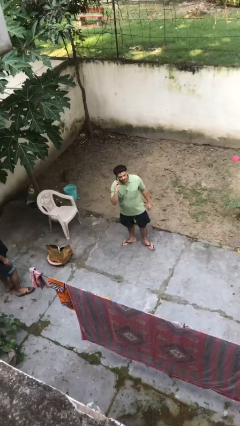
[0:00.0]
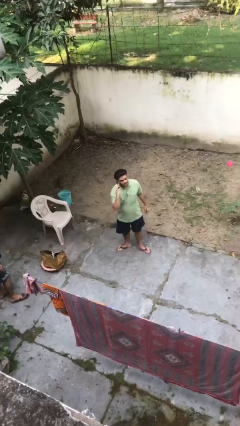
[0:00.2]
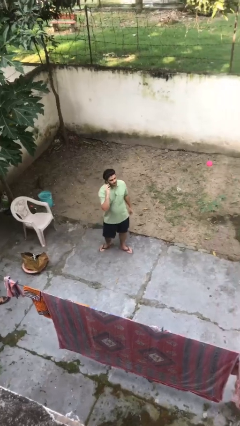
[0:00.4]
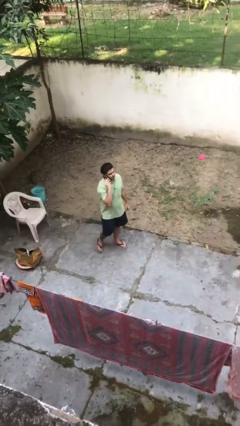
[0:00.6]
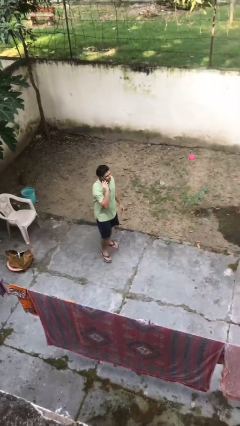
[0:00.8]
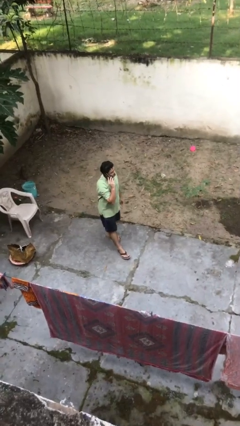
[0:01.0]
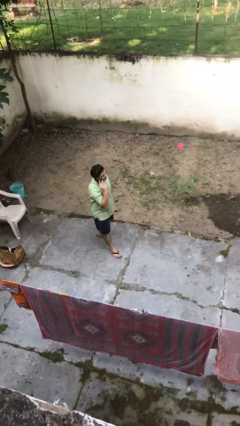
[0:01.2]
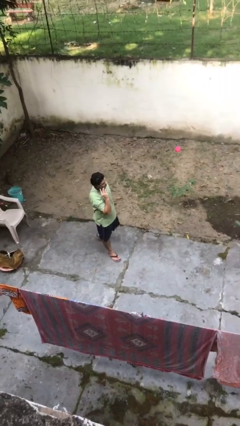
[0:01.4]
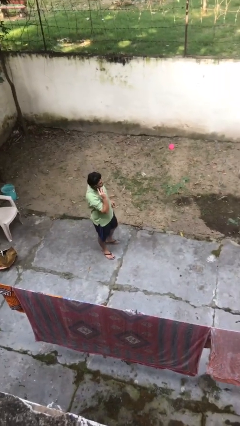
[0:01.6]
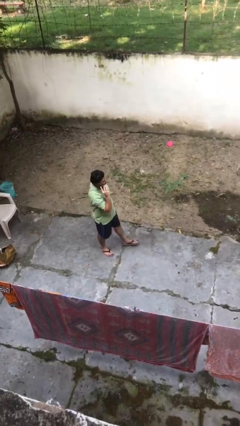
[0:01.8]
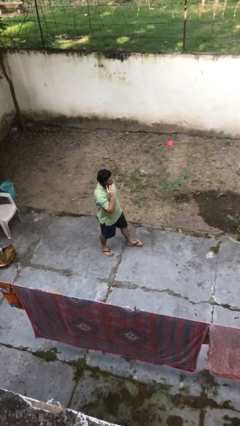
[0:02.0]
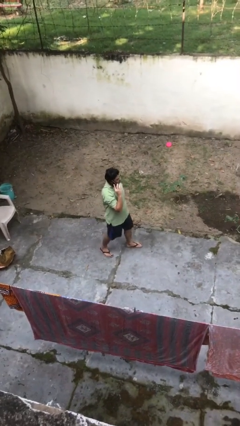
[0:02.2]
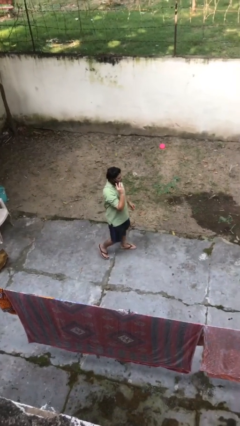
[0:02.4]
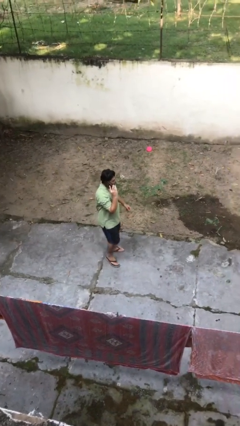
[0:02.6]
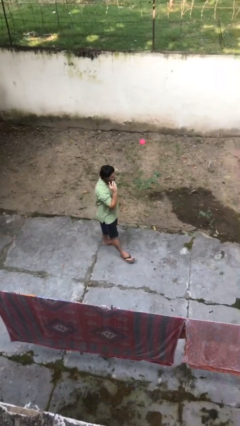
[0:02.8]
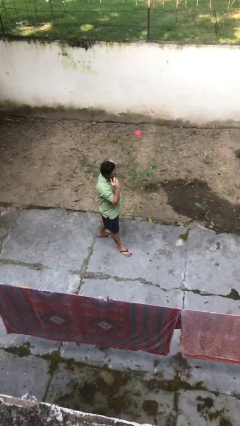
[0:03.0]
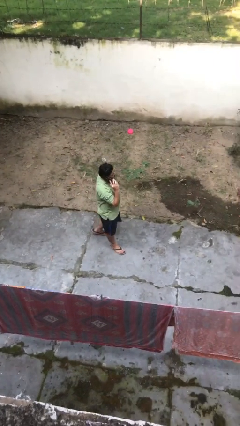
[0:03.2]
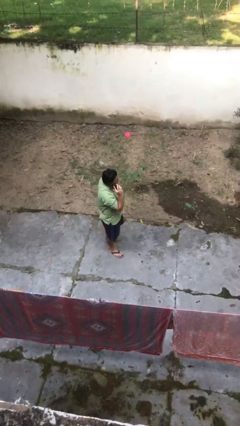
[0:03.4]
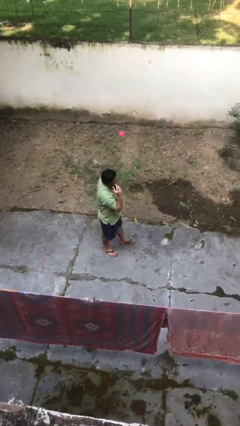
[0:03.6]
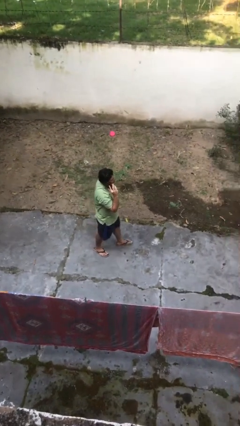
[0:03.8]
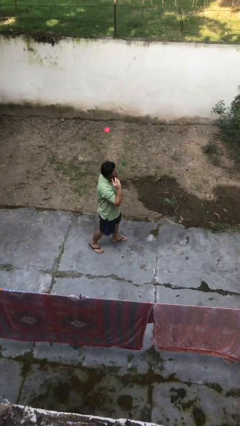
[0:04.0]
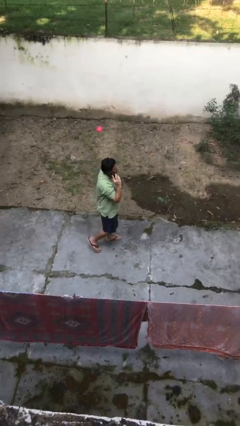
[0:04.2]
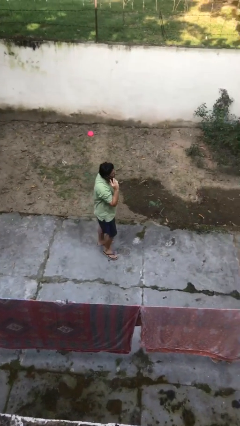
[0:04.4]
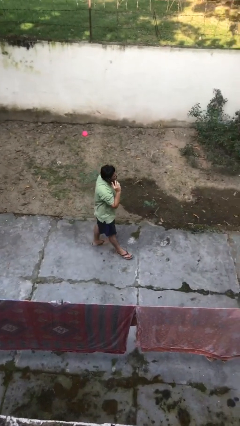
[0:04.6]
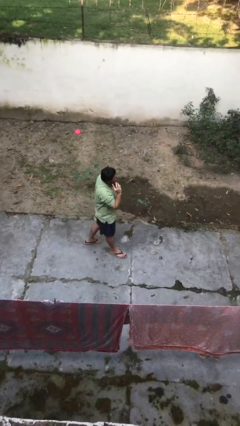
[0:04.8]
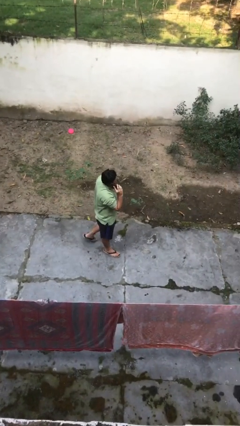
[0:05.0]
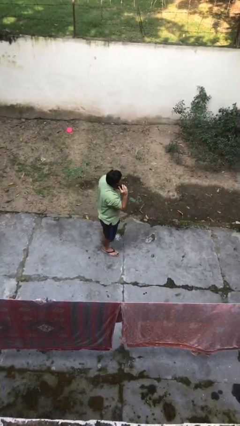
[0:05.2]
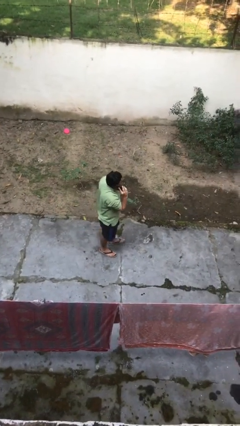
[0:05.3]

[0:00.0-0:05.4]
person talks on phone

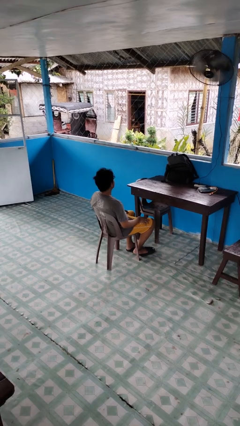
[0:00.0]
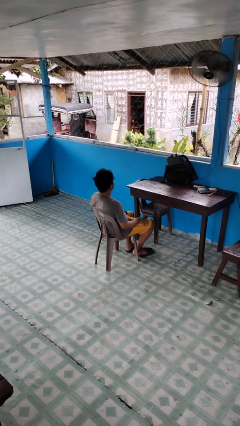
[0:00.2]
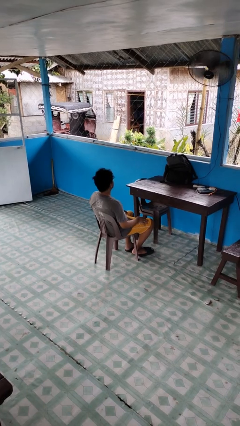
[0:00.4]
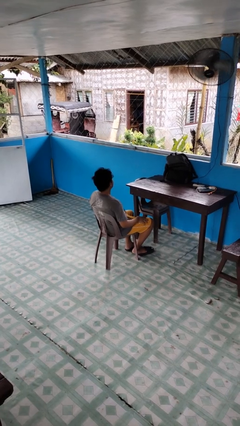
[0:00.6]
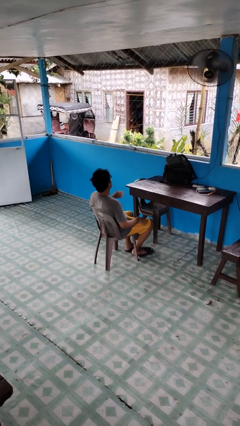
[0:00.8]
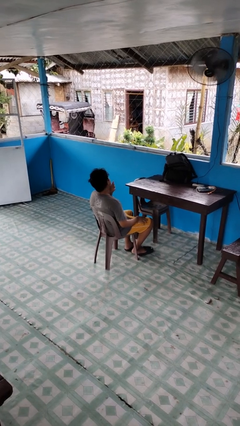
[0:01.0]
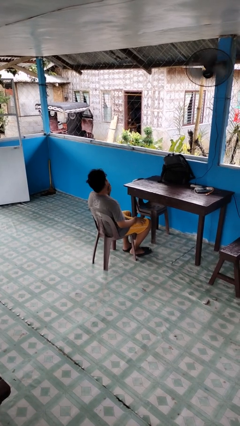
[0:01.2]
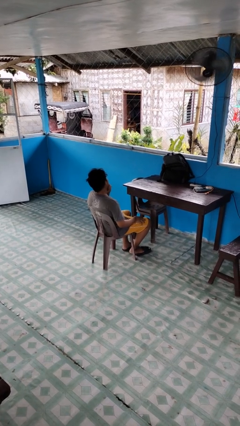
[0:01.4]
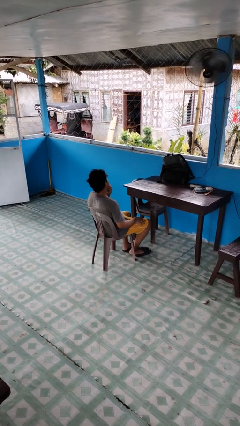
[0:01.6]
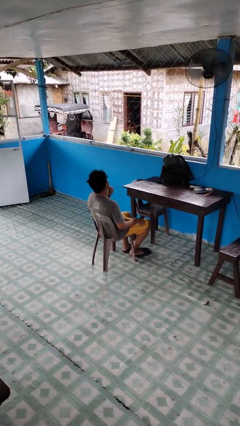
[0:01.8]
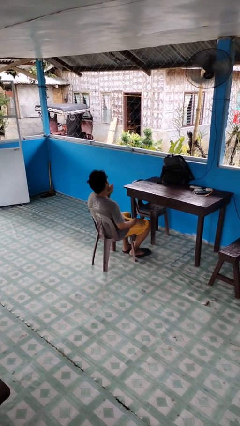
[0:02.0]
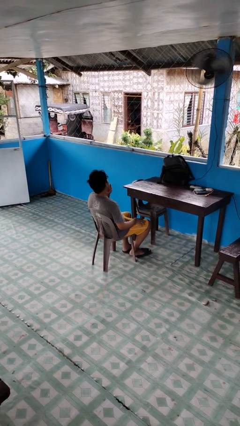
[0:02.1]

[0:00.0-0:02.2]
person strokes chin

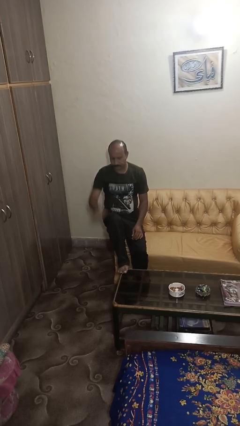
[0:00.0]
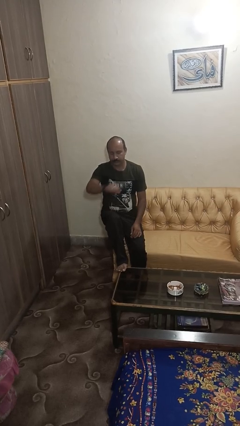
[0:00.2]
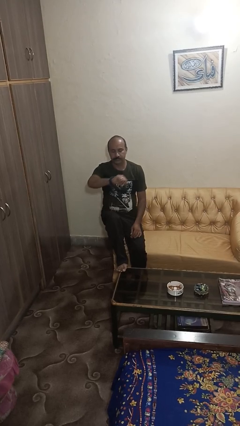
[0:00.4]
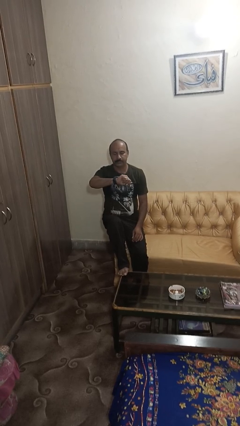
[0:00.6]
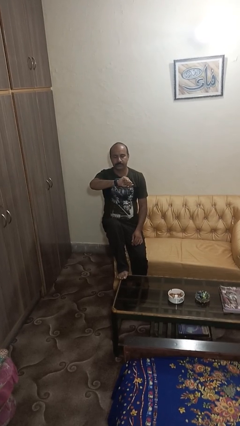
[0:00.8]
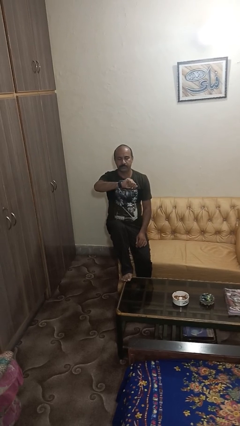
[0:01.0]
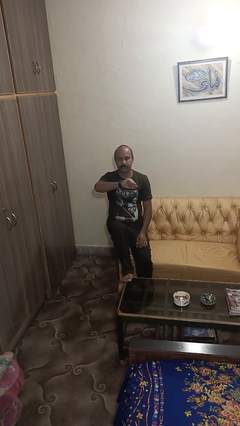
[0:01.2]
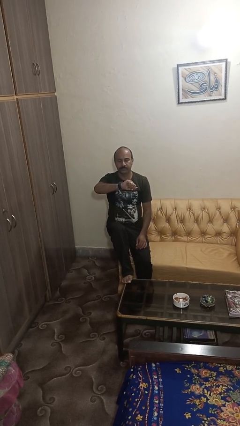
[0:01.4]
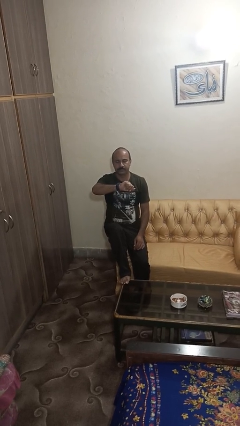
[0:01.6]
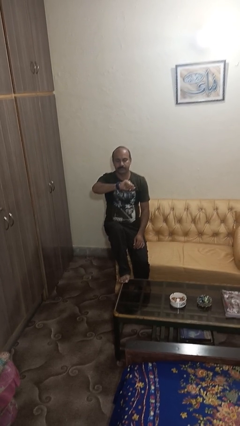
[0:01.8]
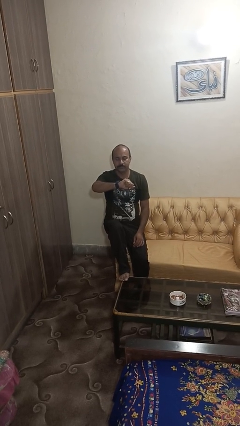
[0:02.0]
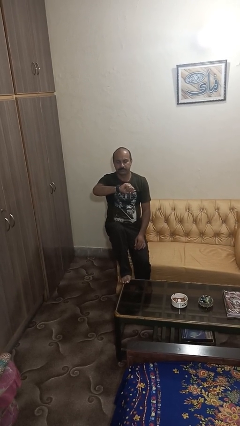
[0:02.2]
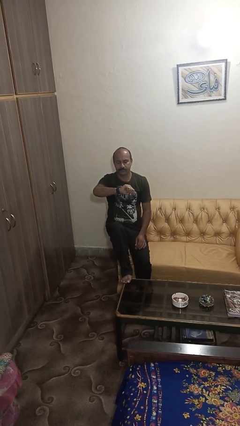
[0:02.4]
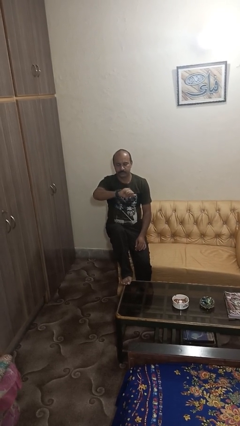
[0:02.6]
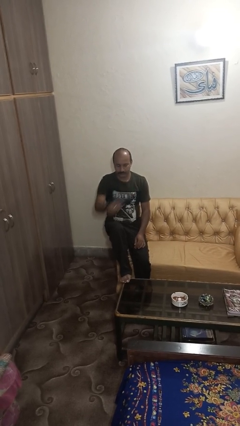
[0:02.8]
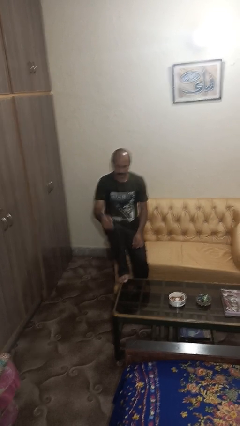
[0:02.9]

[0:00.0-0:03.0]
person looks at wristwatch

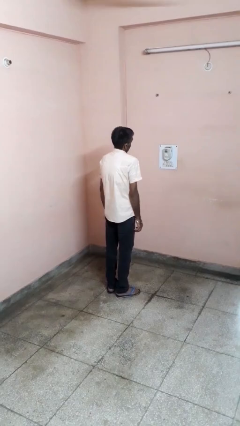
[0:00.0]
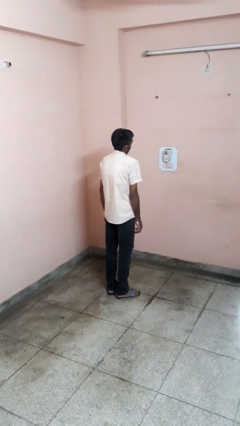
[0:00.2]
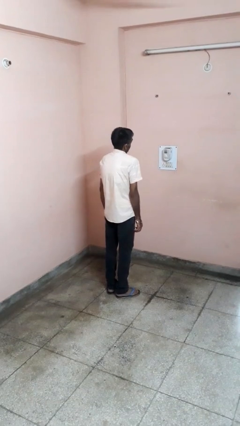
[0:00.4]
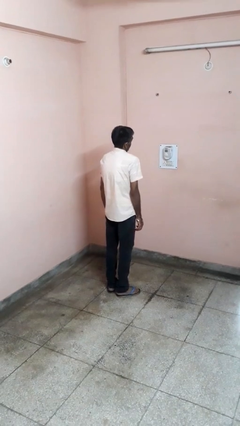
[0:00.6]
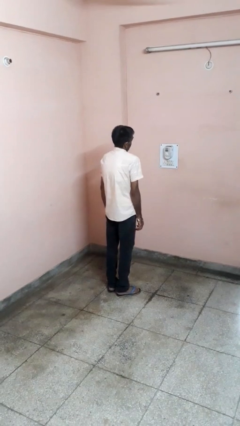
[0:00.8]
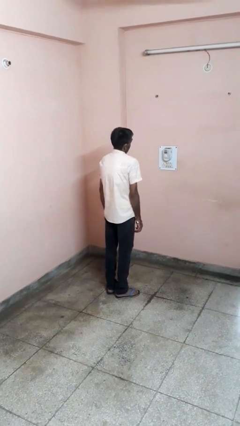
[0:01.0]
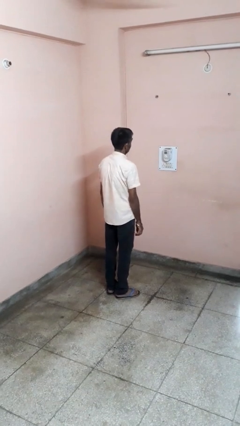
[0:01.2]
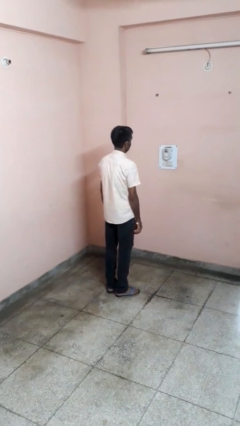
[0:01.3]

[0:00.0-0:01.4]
person shrugs

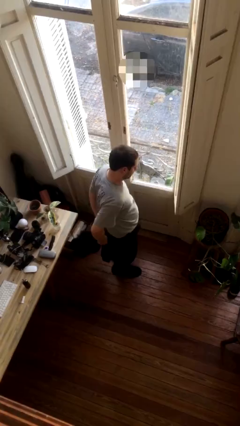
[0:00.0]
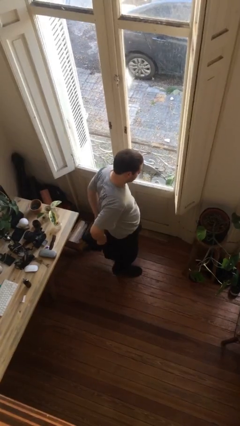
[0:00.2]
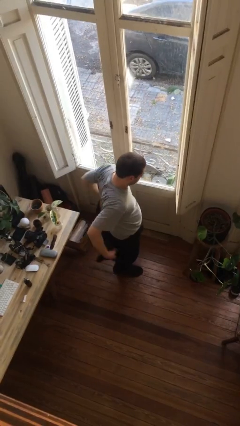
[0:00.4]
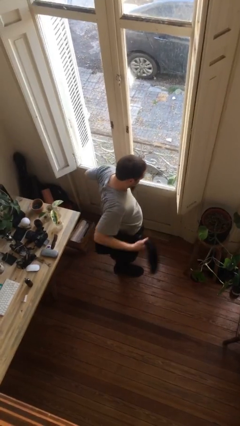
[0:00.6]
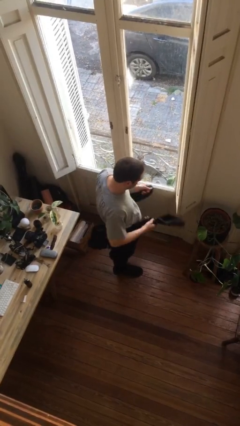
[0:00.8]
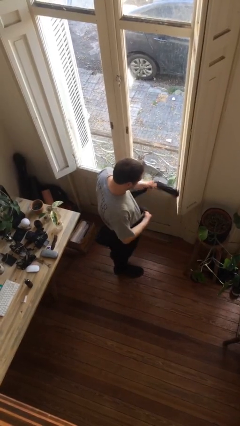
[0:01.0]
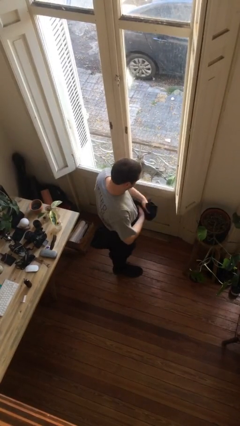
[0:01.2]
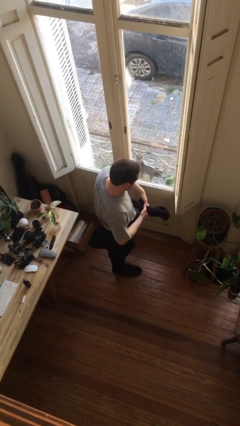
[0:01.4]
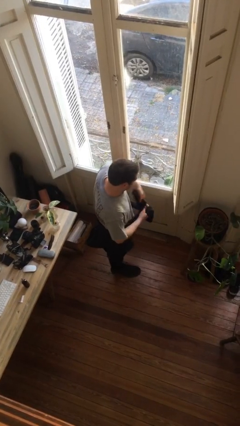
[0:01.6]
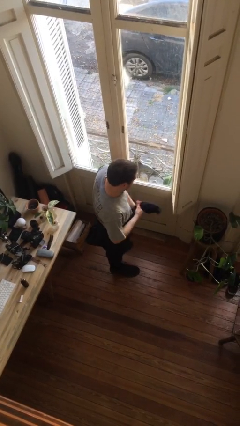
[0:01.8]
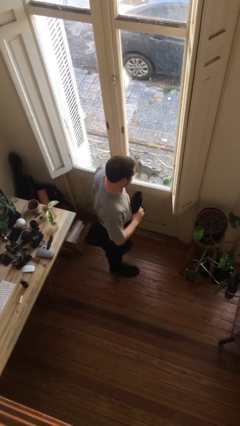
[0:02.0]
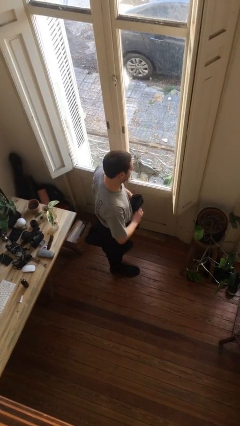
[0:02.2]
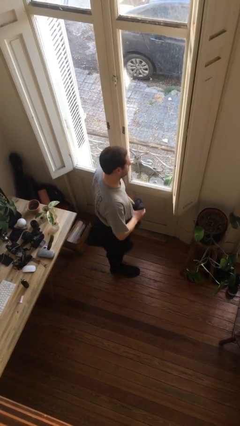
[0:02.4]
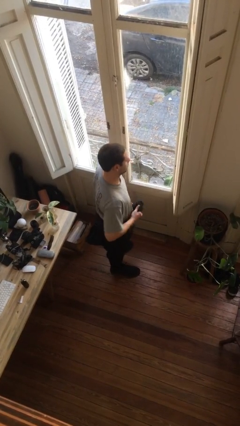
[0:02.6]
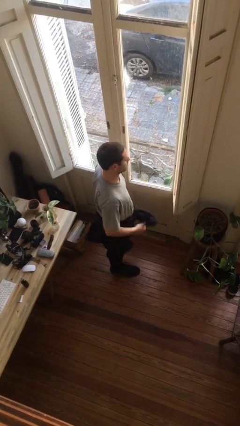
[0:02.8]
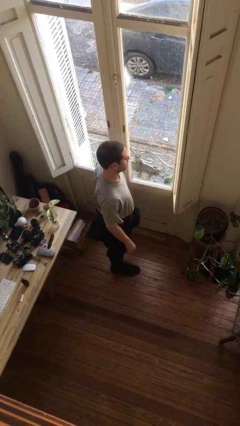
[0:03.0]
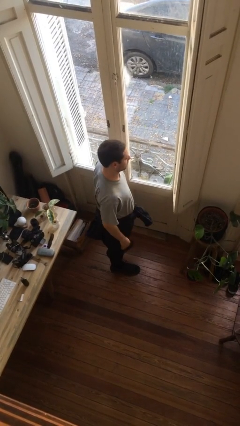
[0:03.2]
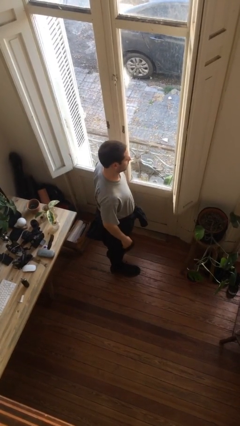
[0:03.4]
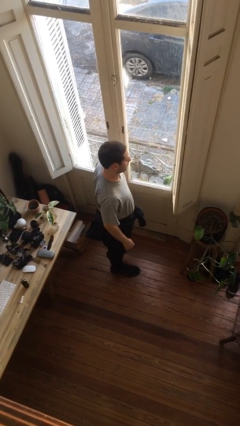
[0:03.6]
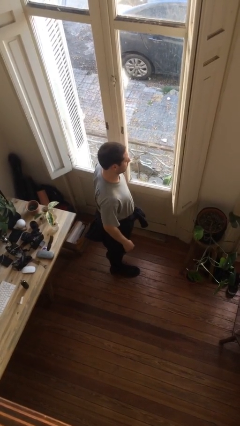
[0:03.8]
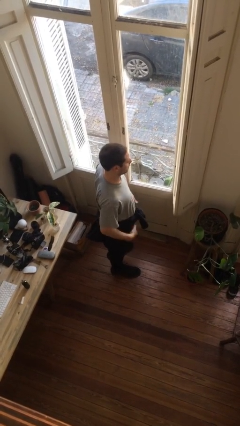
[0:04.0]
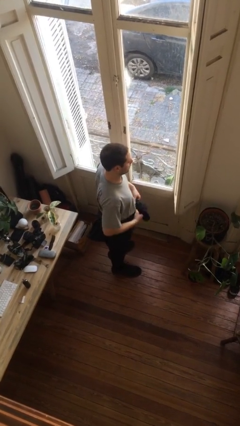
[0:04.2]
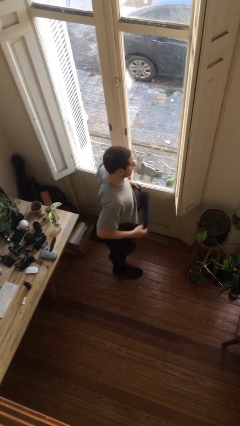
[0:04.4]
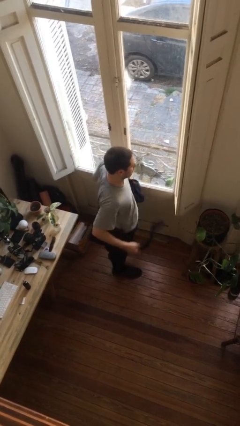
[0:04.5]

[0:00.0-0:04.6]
person ties jacket around waist

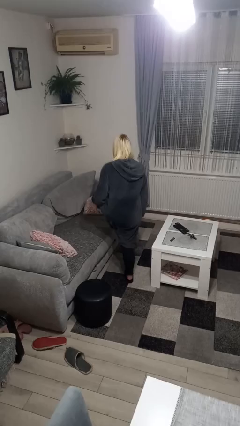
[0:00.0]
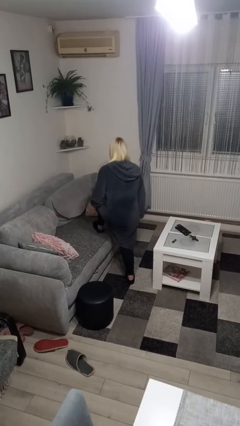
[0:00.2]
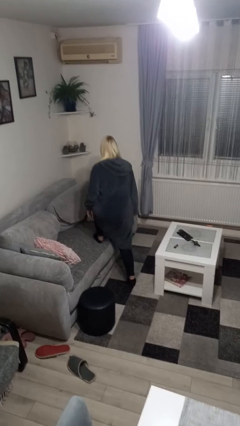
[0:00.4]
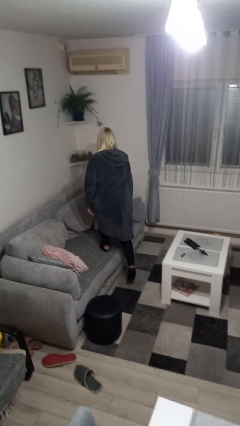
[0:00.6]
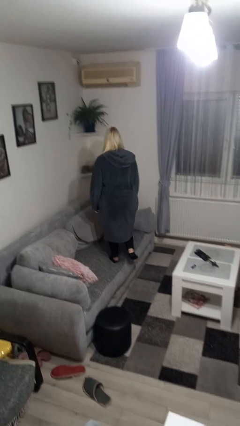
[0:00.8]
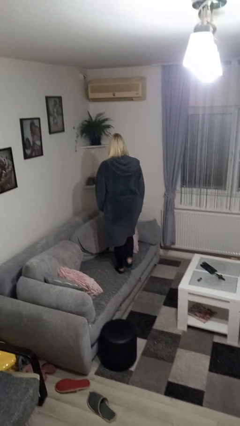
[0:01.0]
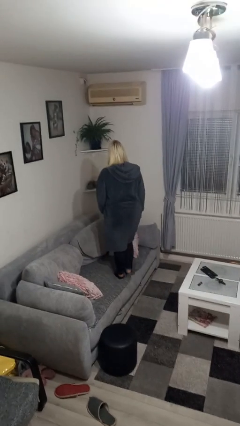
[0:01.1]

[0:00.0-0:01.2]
person climbs on couch
